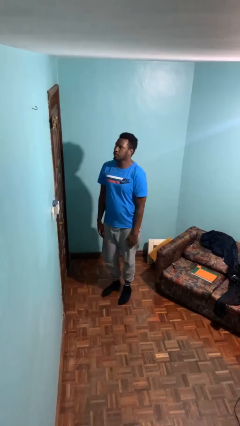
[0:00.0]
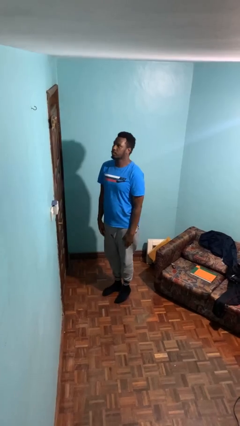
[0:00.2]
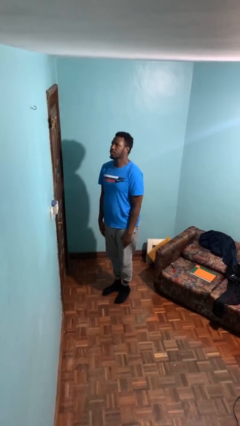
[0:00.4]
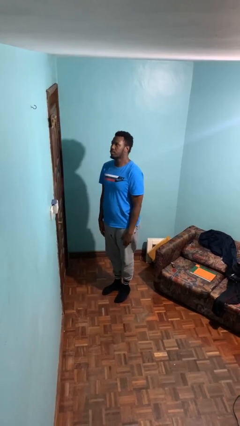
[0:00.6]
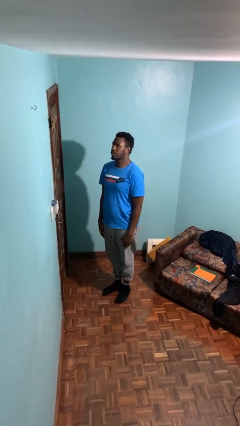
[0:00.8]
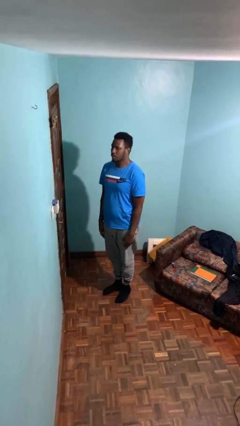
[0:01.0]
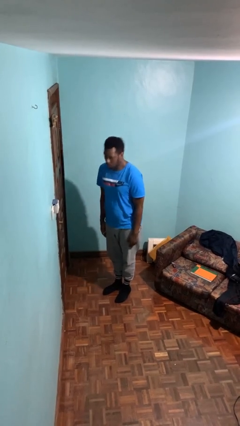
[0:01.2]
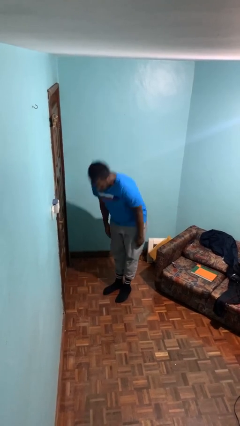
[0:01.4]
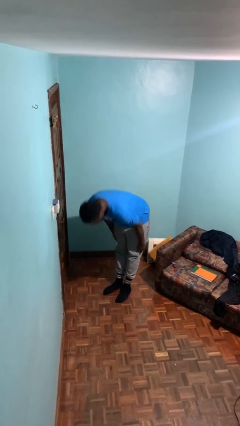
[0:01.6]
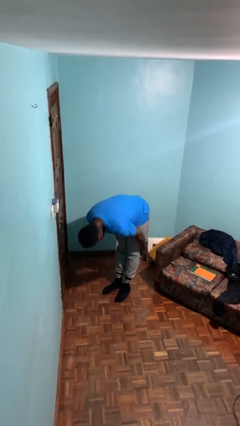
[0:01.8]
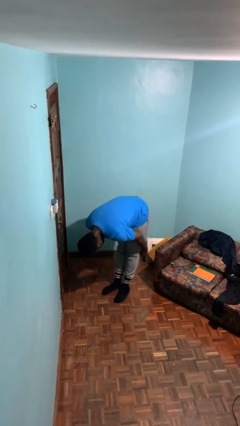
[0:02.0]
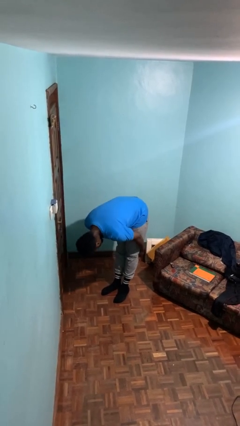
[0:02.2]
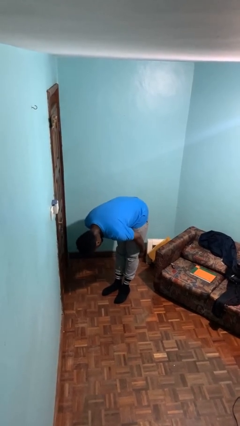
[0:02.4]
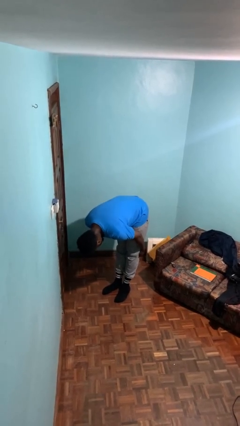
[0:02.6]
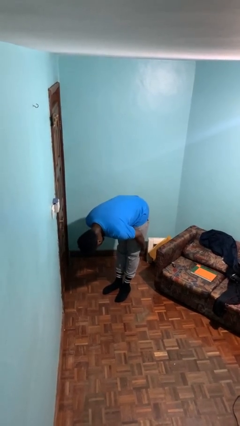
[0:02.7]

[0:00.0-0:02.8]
person bows

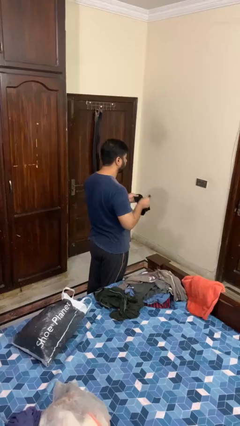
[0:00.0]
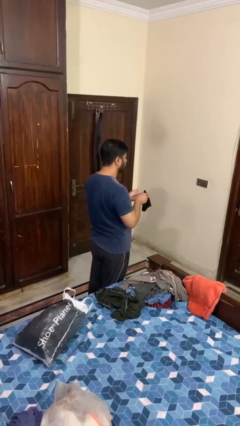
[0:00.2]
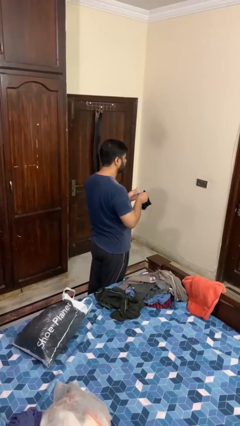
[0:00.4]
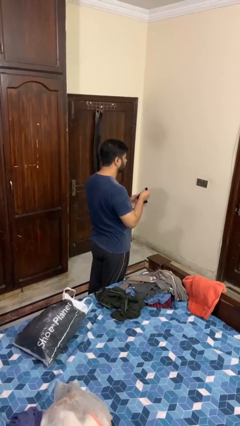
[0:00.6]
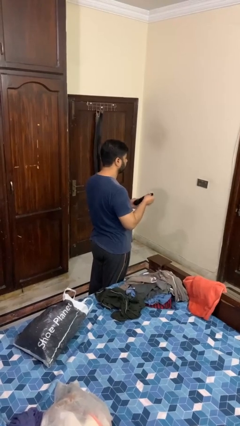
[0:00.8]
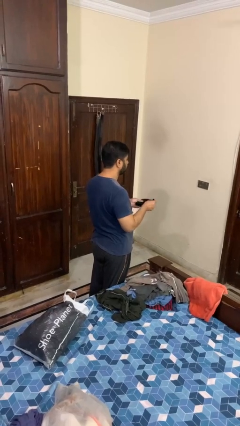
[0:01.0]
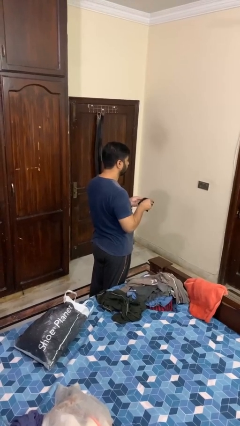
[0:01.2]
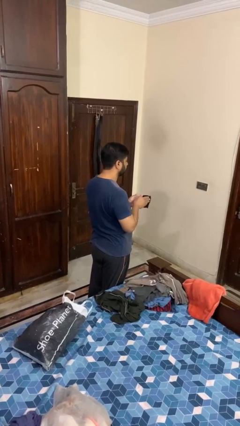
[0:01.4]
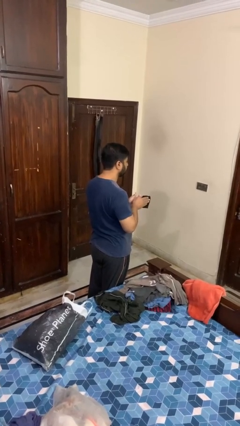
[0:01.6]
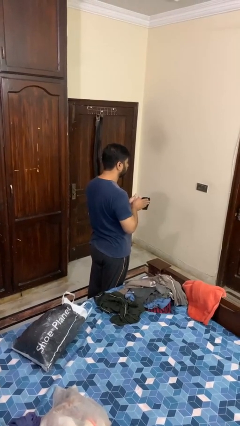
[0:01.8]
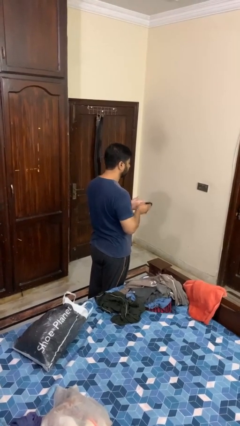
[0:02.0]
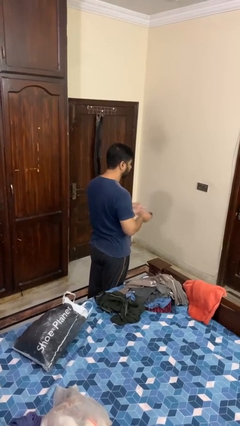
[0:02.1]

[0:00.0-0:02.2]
person folds socks

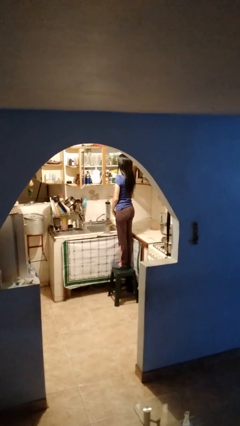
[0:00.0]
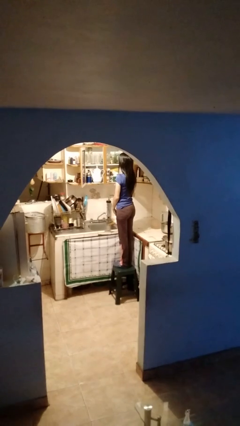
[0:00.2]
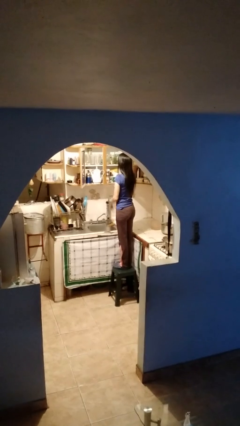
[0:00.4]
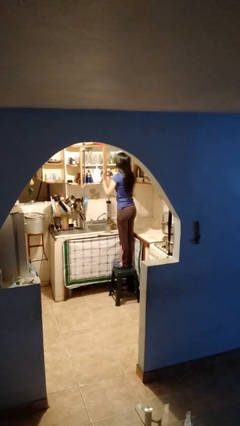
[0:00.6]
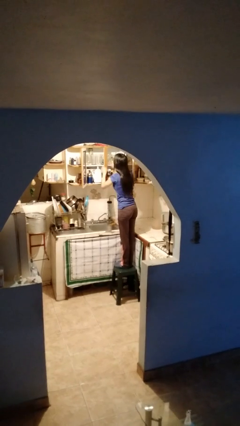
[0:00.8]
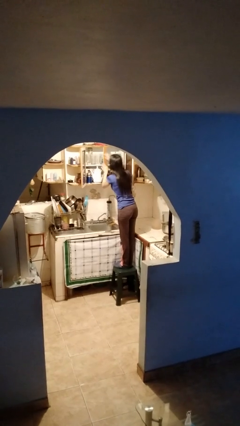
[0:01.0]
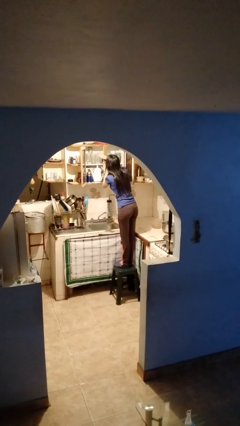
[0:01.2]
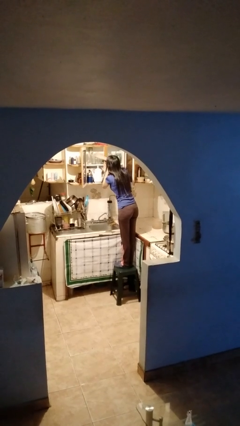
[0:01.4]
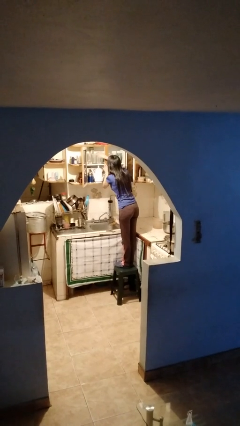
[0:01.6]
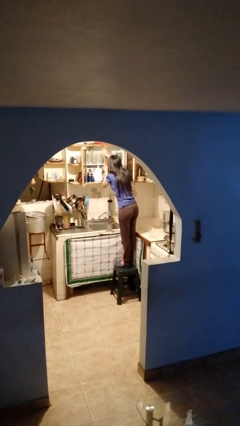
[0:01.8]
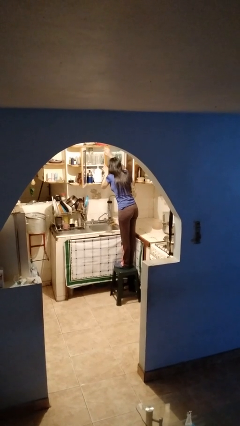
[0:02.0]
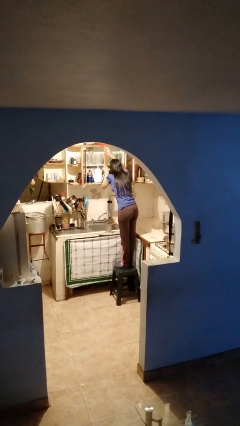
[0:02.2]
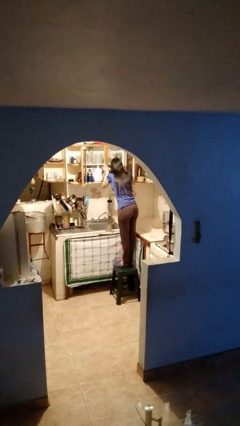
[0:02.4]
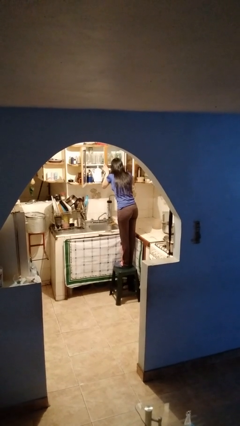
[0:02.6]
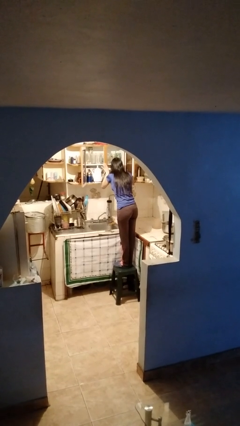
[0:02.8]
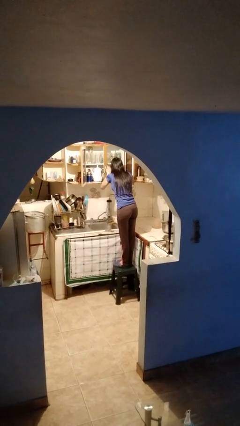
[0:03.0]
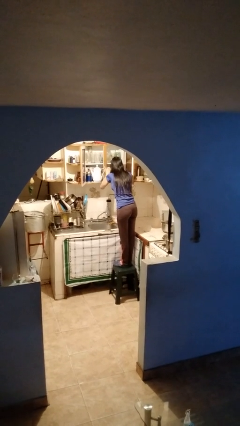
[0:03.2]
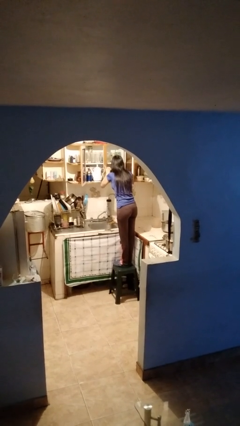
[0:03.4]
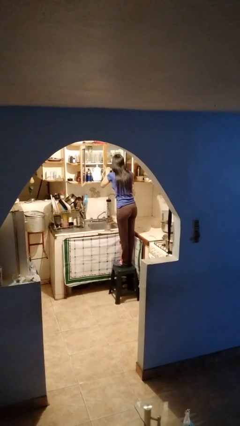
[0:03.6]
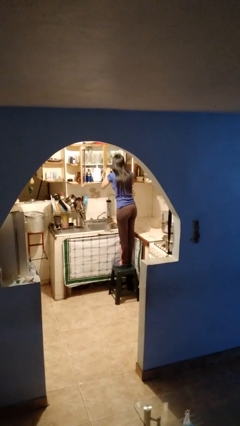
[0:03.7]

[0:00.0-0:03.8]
person searches in cabinet

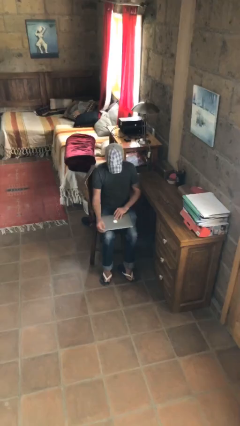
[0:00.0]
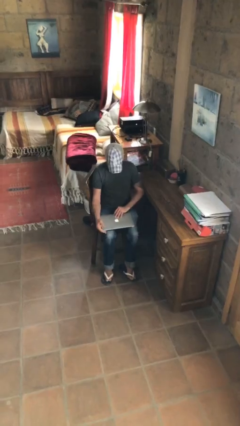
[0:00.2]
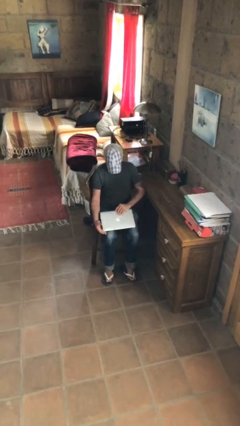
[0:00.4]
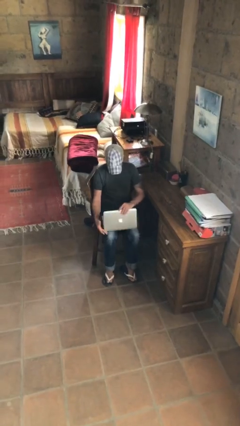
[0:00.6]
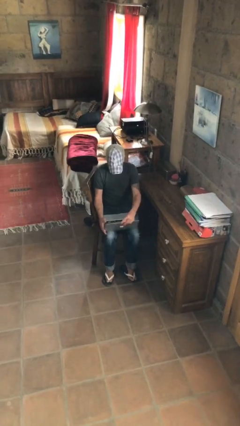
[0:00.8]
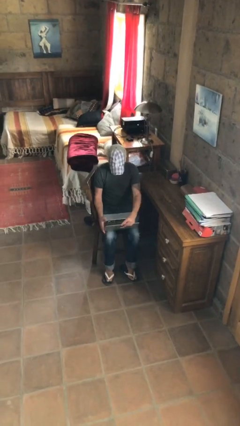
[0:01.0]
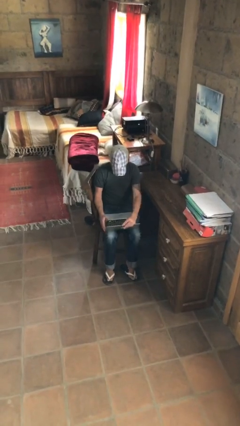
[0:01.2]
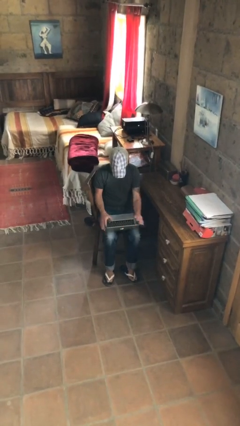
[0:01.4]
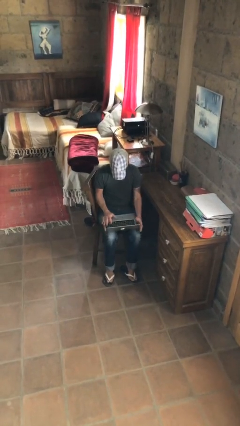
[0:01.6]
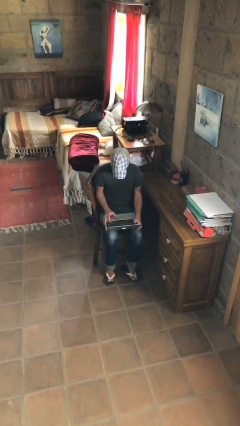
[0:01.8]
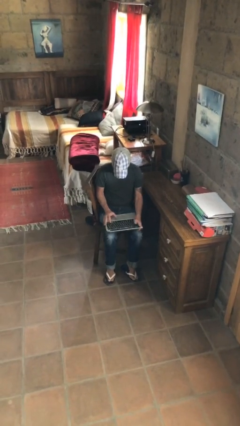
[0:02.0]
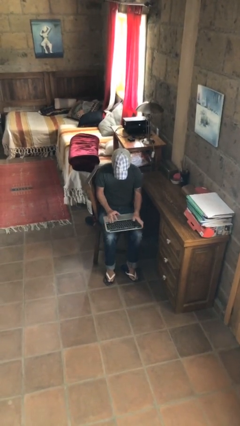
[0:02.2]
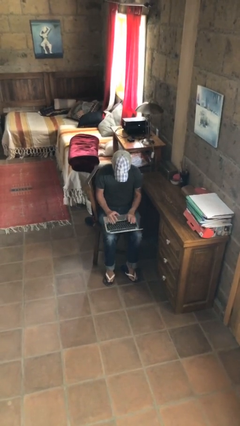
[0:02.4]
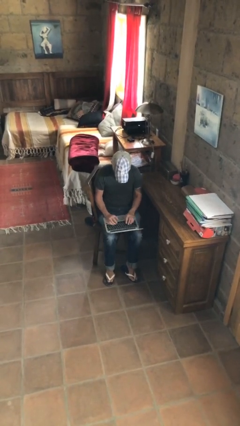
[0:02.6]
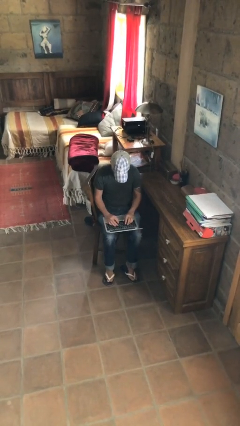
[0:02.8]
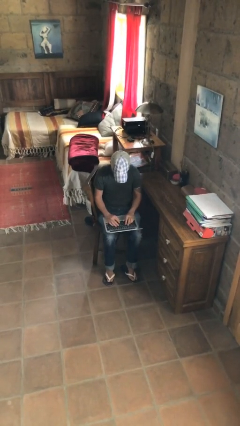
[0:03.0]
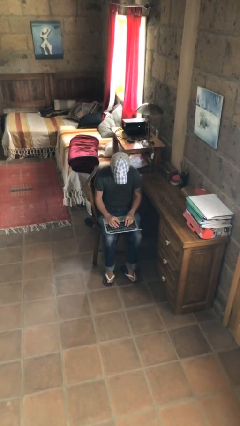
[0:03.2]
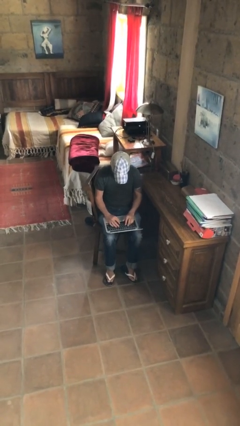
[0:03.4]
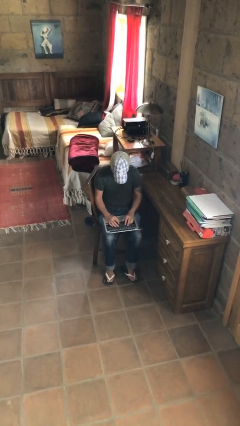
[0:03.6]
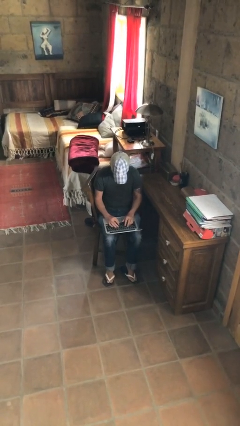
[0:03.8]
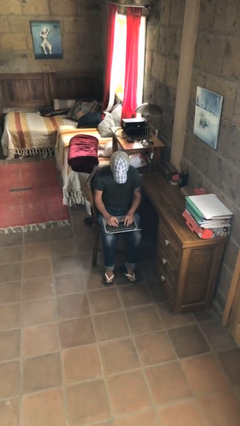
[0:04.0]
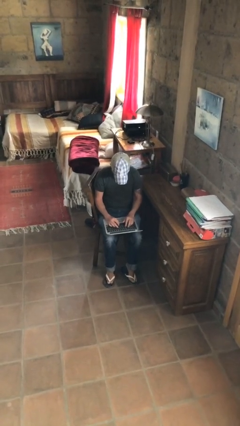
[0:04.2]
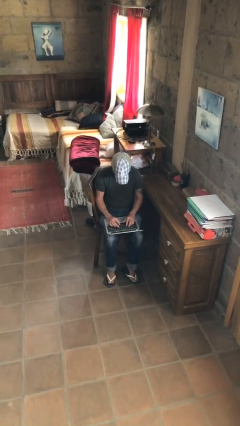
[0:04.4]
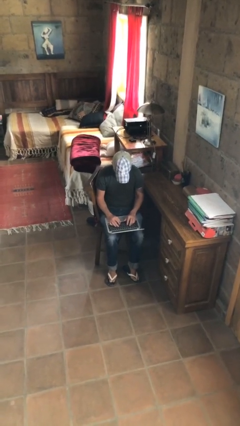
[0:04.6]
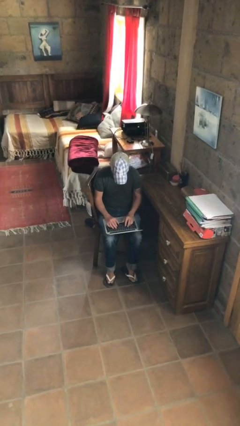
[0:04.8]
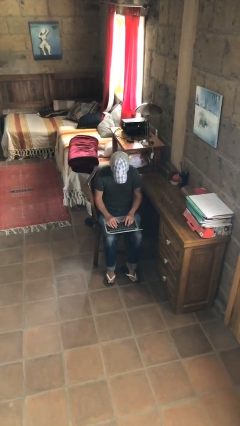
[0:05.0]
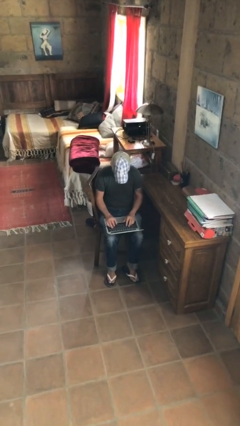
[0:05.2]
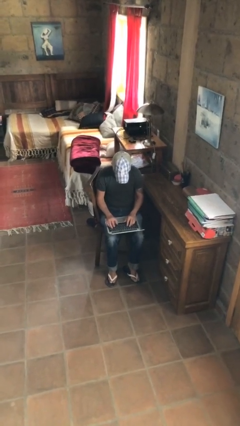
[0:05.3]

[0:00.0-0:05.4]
person interacts with laptop

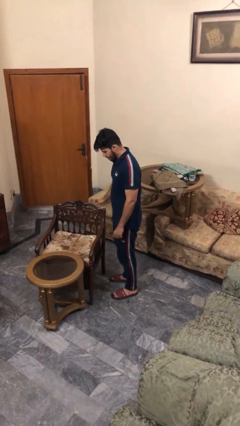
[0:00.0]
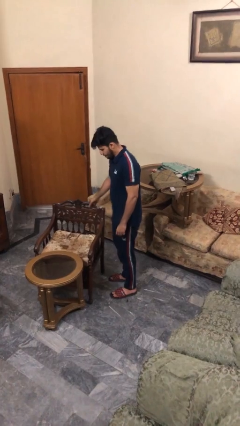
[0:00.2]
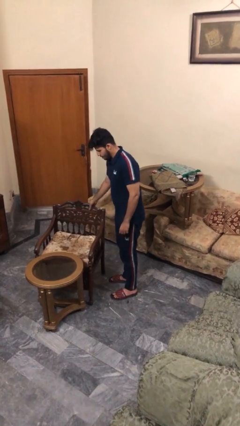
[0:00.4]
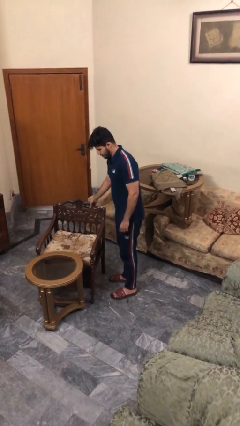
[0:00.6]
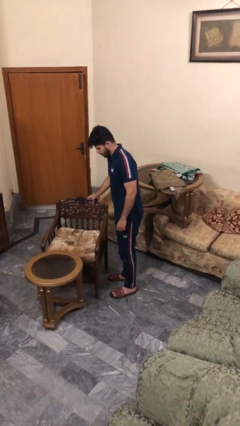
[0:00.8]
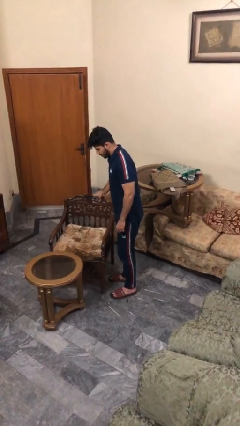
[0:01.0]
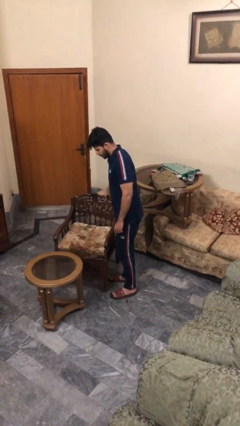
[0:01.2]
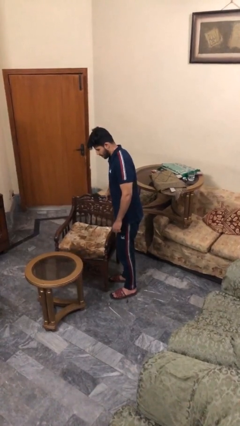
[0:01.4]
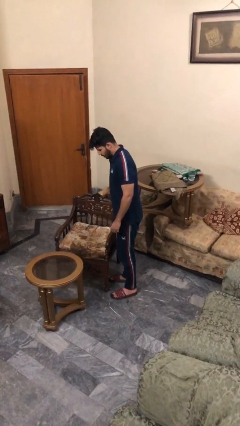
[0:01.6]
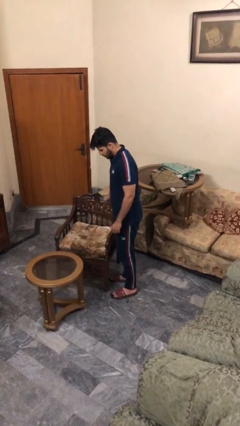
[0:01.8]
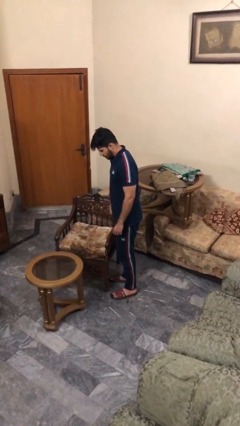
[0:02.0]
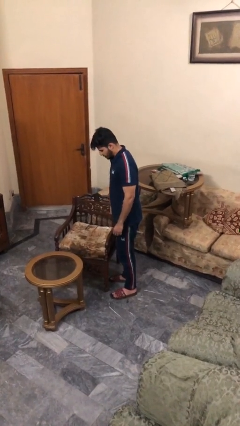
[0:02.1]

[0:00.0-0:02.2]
person pulls out chair

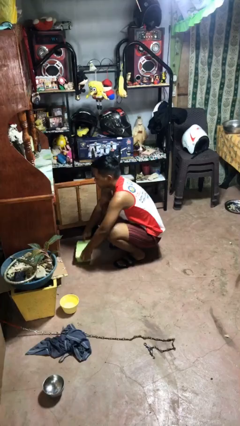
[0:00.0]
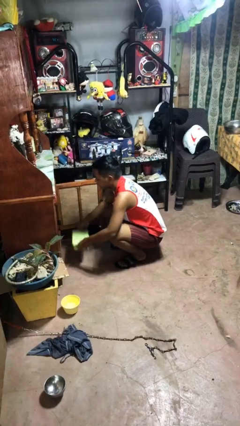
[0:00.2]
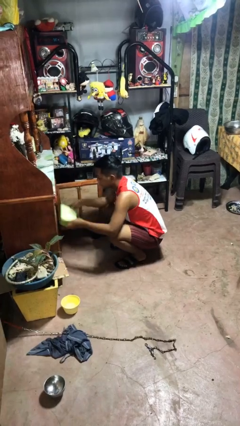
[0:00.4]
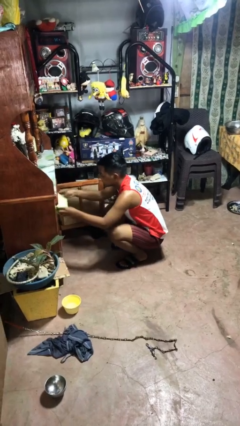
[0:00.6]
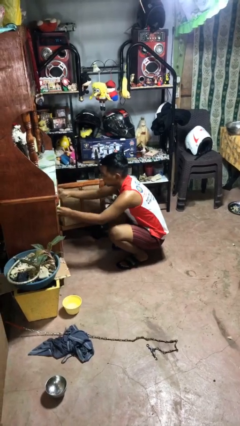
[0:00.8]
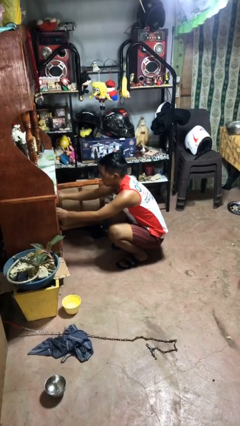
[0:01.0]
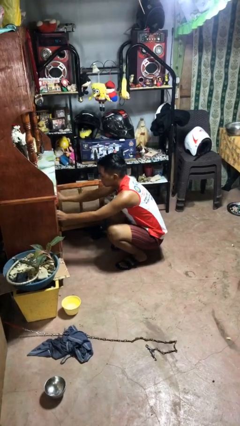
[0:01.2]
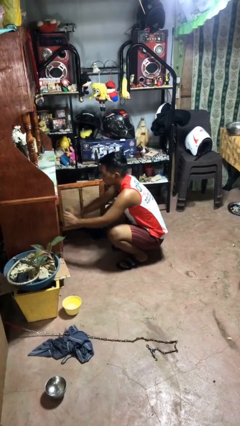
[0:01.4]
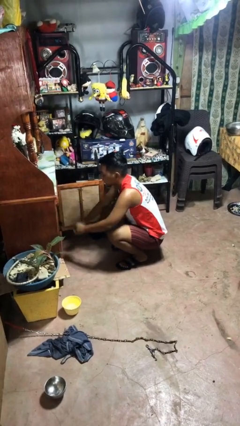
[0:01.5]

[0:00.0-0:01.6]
person puts object in cabinet
